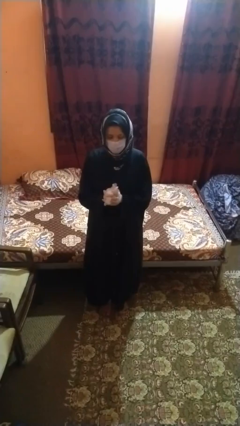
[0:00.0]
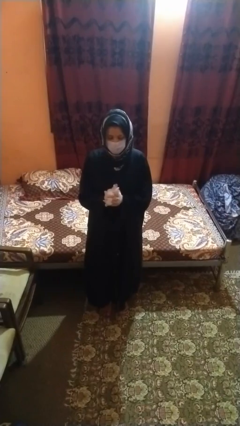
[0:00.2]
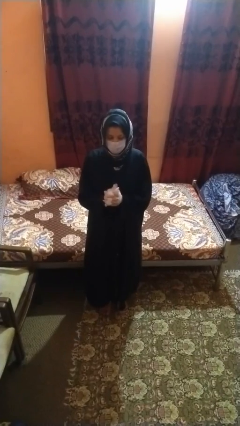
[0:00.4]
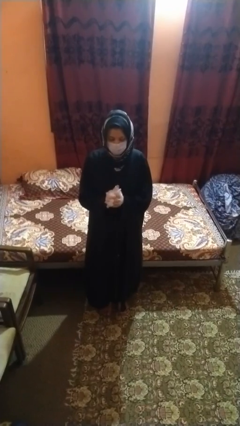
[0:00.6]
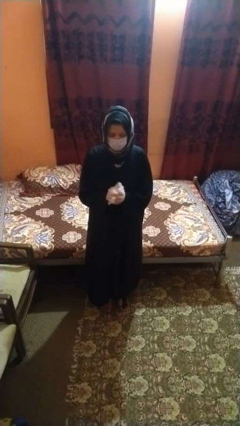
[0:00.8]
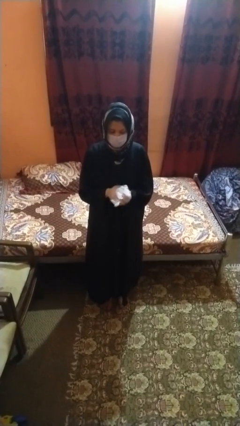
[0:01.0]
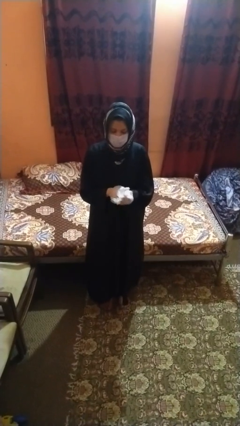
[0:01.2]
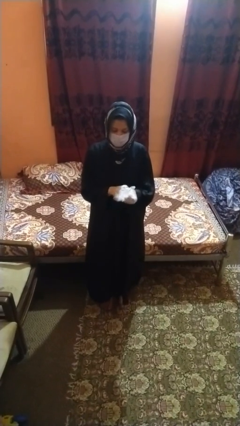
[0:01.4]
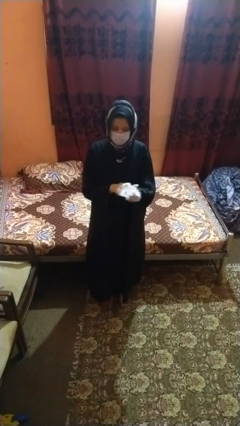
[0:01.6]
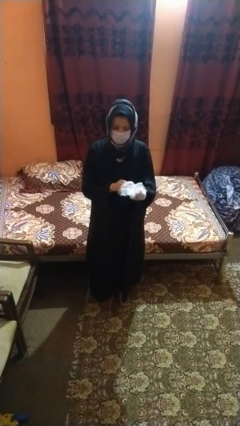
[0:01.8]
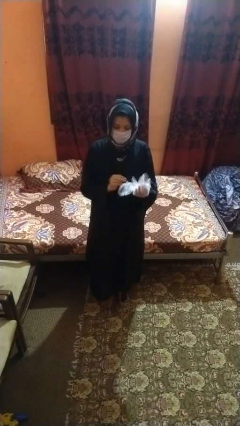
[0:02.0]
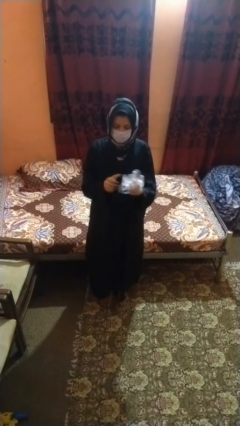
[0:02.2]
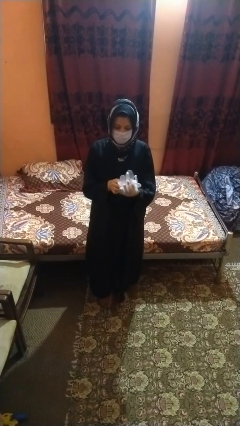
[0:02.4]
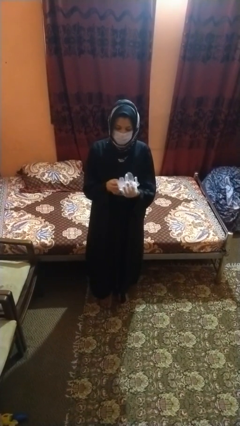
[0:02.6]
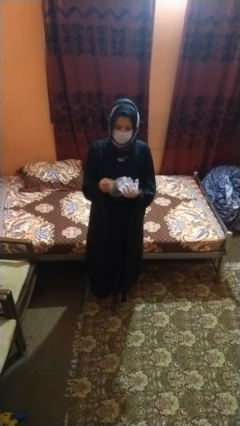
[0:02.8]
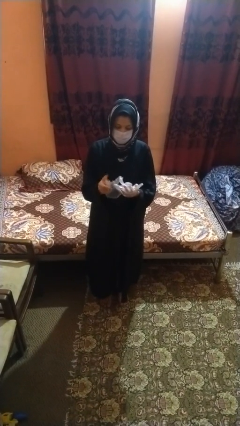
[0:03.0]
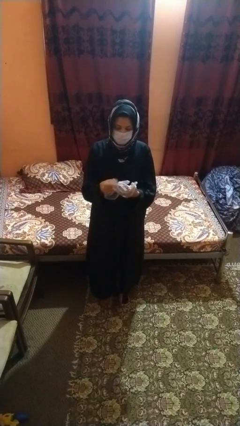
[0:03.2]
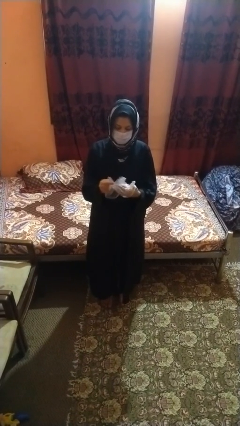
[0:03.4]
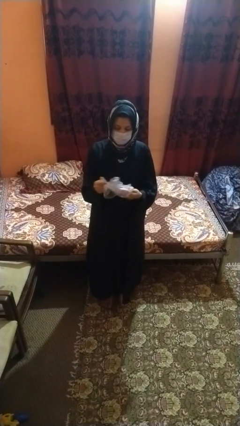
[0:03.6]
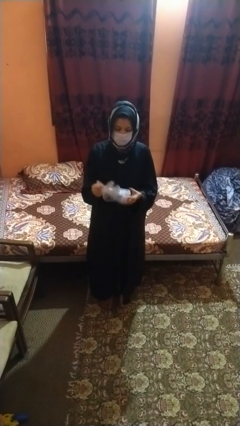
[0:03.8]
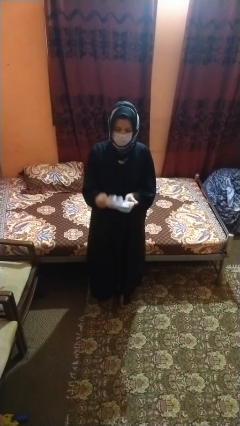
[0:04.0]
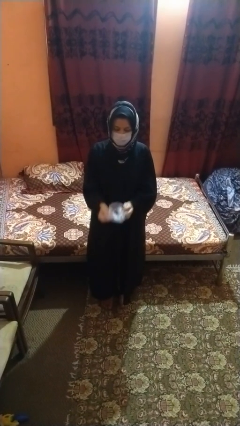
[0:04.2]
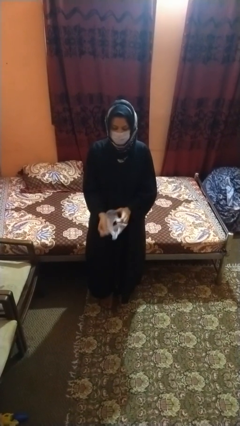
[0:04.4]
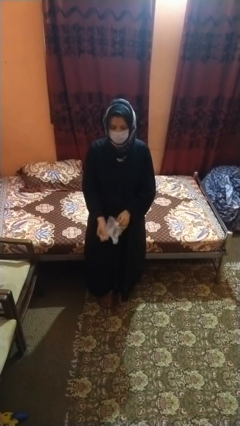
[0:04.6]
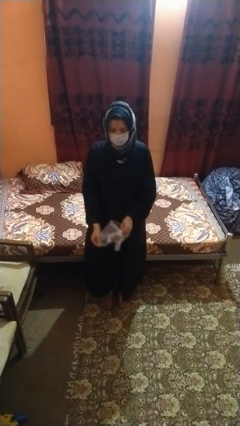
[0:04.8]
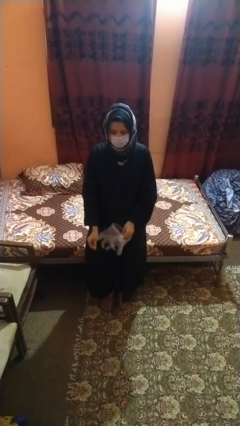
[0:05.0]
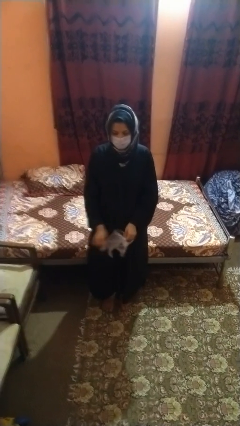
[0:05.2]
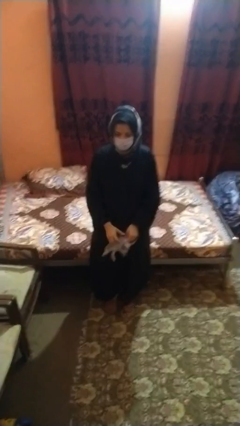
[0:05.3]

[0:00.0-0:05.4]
person takes off gloves

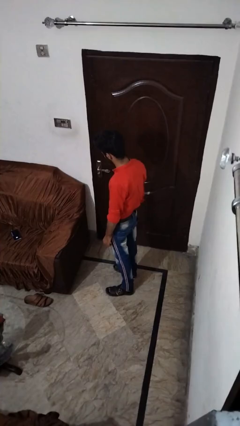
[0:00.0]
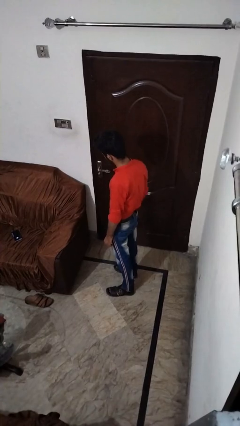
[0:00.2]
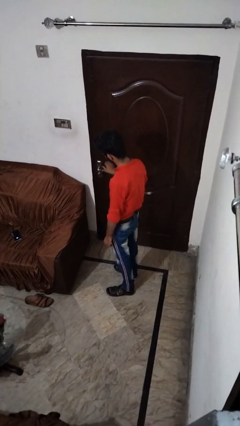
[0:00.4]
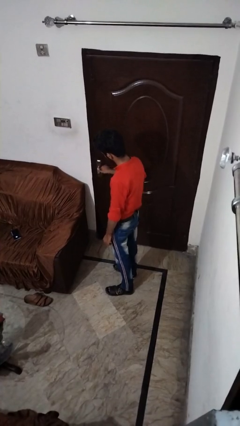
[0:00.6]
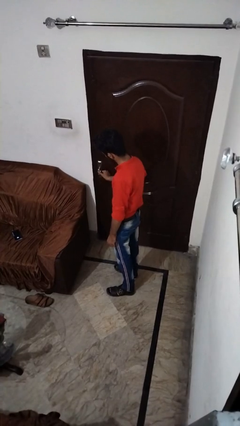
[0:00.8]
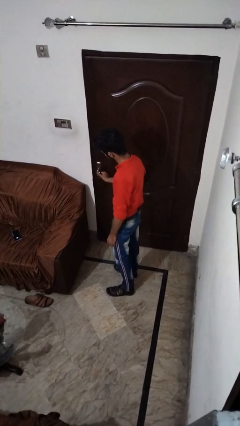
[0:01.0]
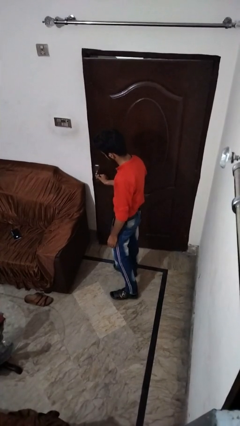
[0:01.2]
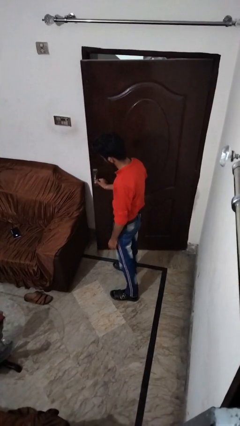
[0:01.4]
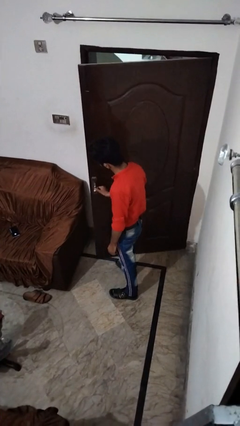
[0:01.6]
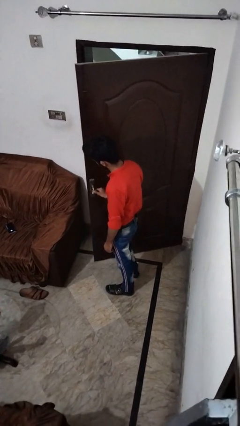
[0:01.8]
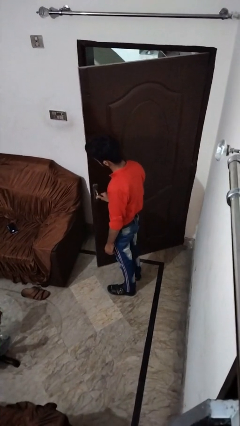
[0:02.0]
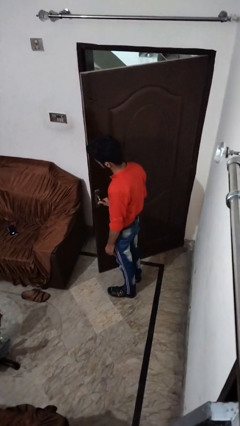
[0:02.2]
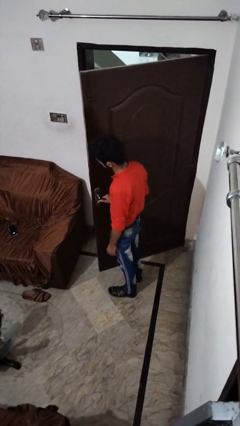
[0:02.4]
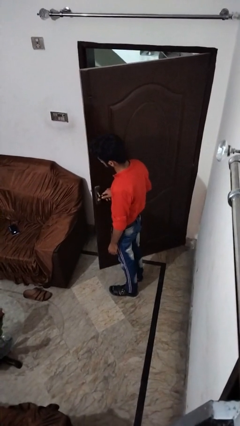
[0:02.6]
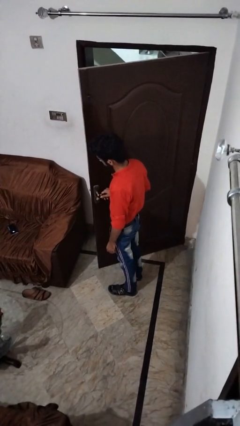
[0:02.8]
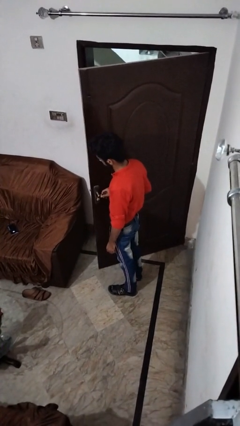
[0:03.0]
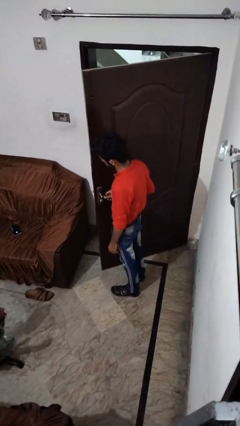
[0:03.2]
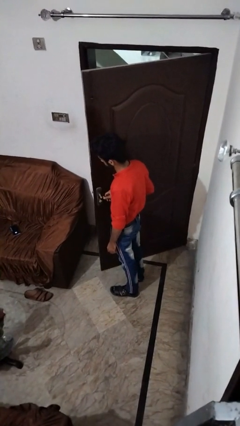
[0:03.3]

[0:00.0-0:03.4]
person opens facility door

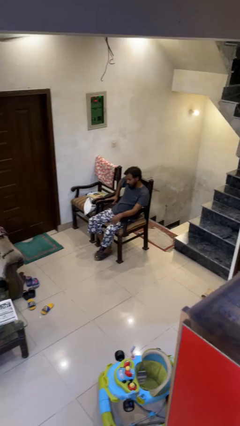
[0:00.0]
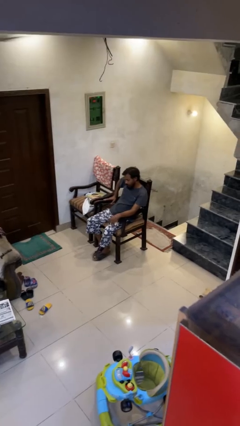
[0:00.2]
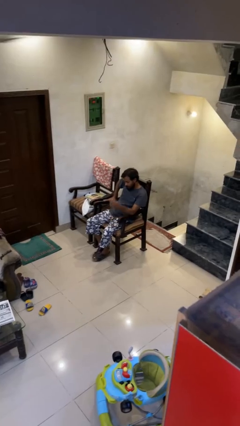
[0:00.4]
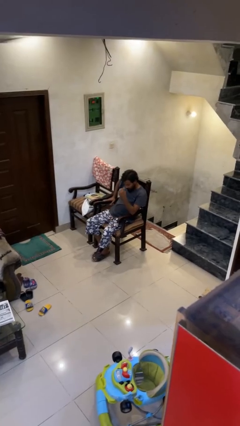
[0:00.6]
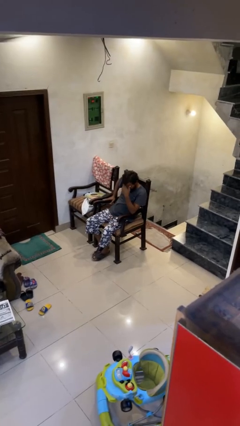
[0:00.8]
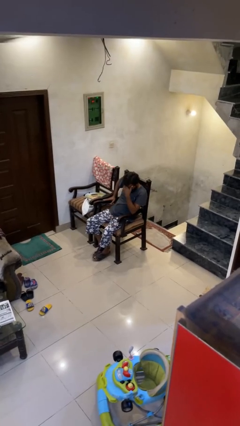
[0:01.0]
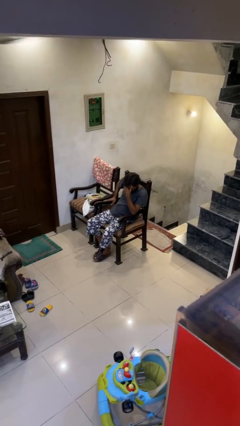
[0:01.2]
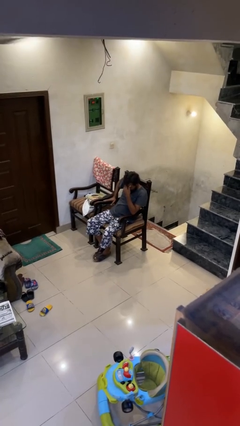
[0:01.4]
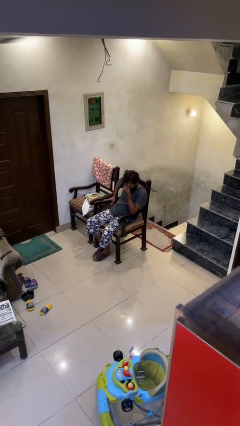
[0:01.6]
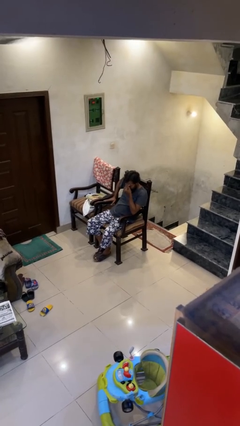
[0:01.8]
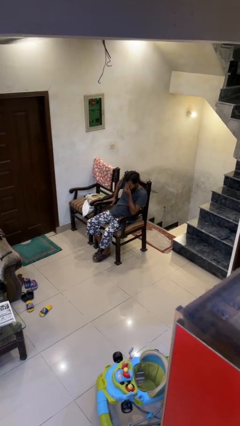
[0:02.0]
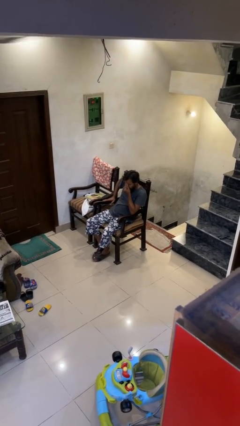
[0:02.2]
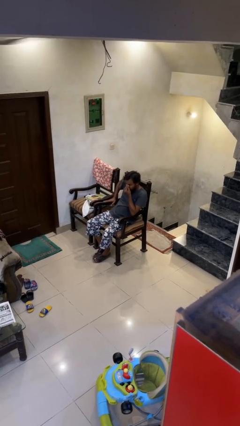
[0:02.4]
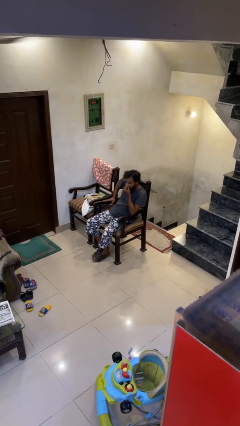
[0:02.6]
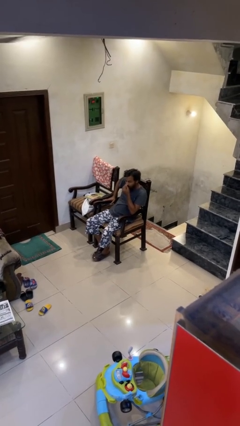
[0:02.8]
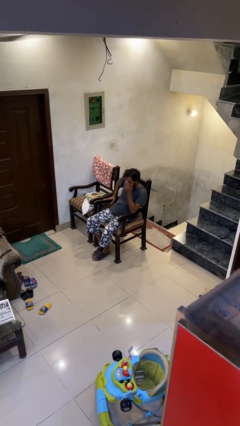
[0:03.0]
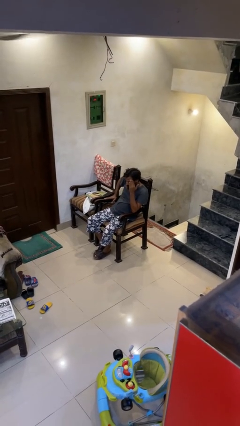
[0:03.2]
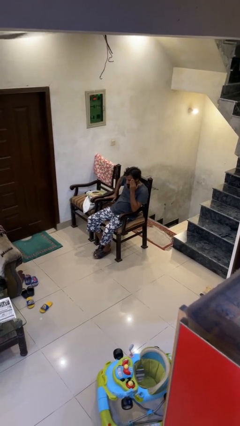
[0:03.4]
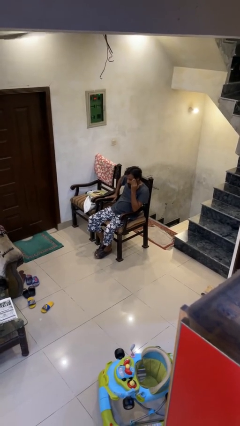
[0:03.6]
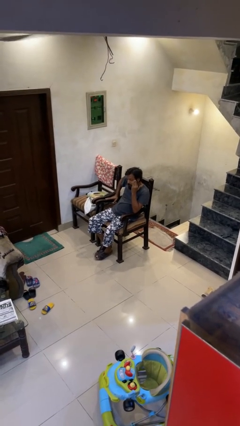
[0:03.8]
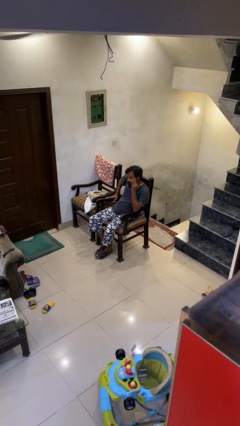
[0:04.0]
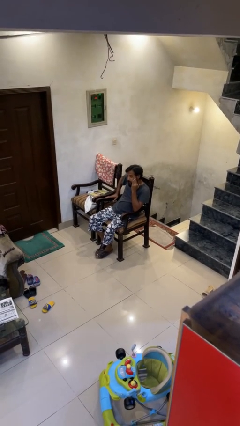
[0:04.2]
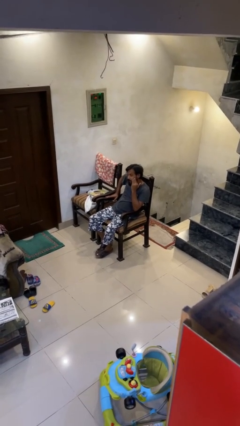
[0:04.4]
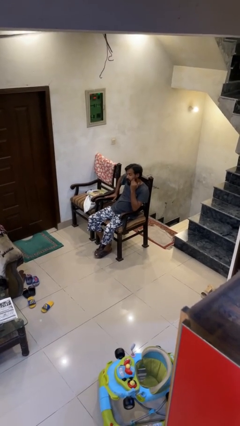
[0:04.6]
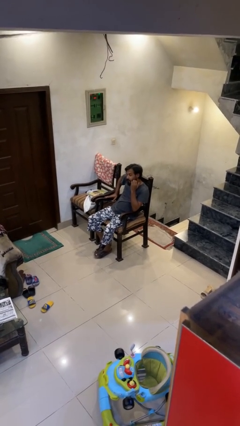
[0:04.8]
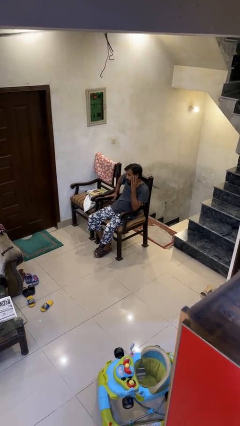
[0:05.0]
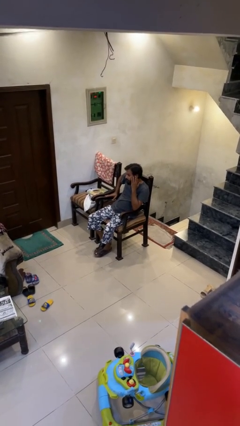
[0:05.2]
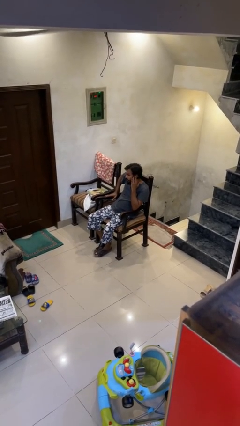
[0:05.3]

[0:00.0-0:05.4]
person scratches face

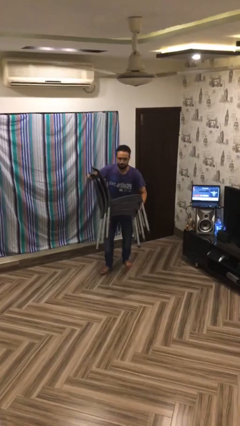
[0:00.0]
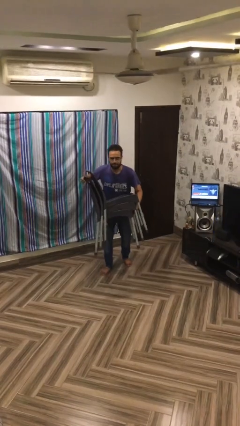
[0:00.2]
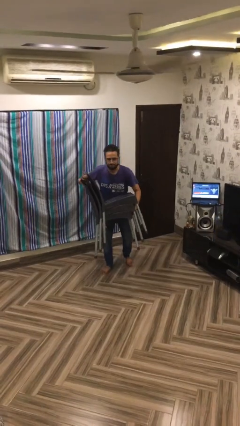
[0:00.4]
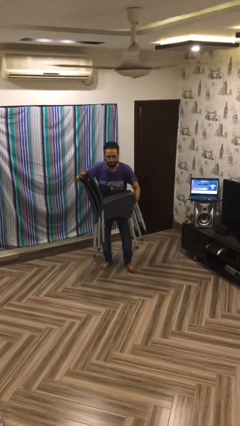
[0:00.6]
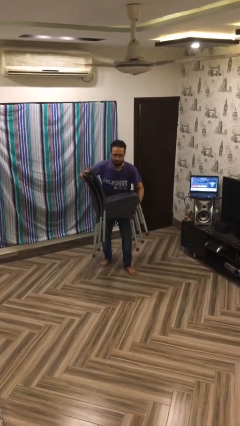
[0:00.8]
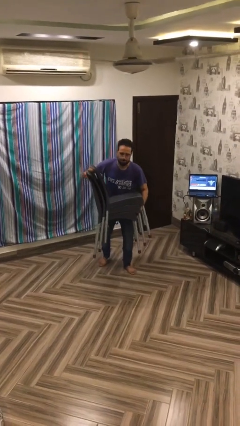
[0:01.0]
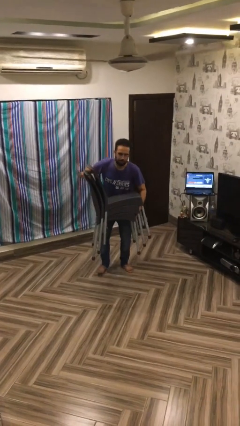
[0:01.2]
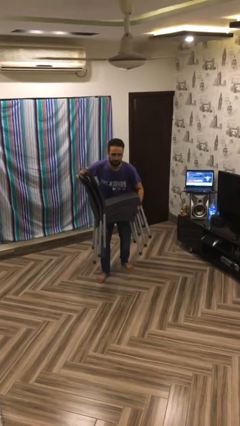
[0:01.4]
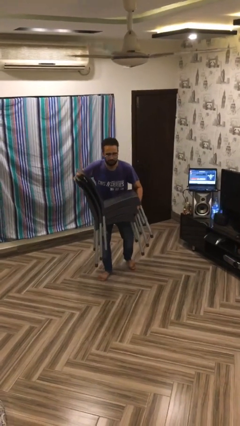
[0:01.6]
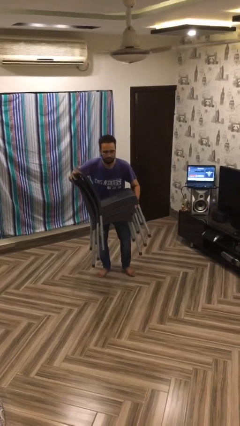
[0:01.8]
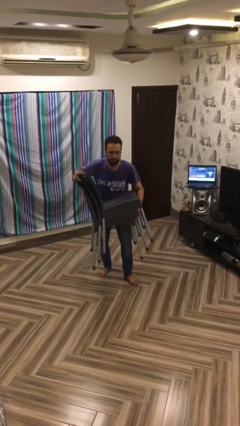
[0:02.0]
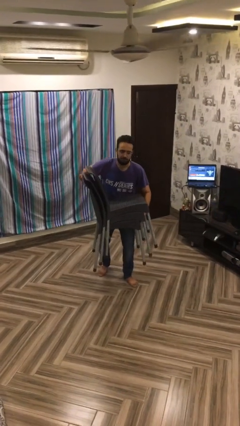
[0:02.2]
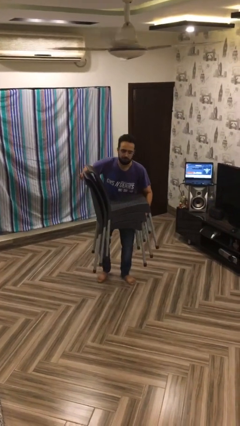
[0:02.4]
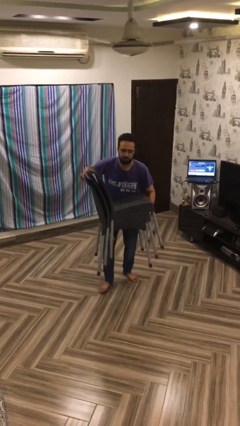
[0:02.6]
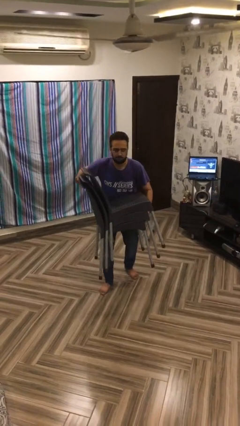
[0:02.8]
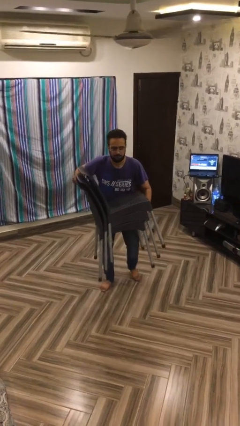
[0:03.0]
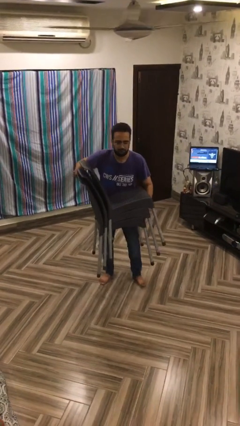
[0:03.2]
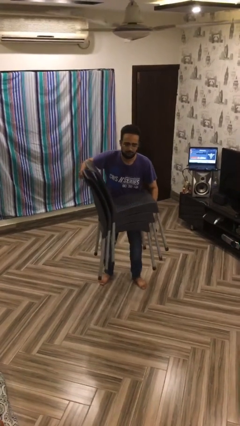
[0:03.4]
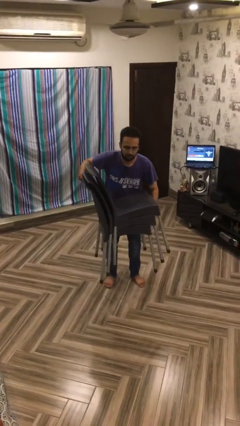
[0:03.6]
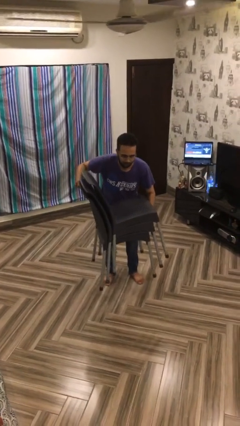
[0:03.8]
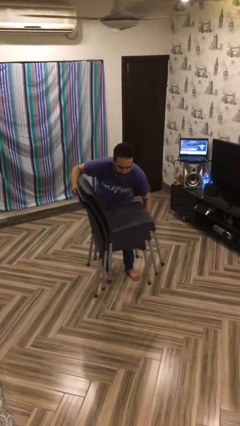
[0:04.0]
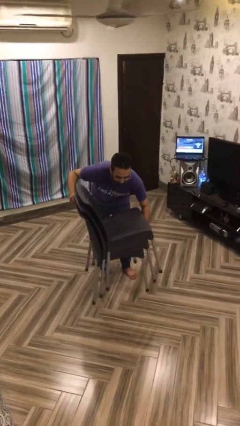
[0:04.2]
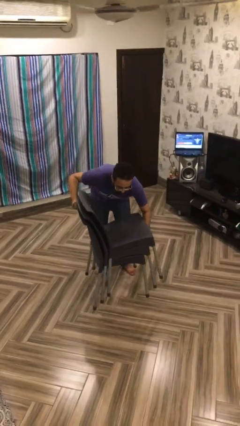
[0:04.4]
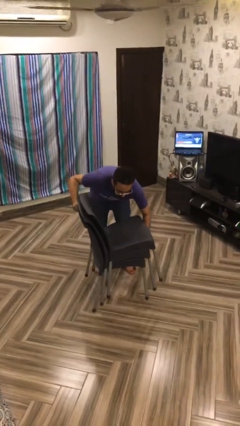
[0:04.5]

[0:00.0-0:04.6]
person carries heavy object
